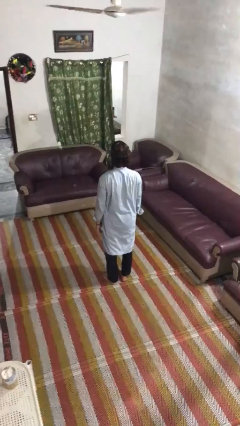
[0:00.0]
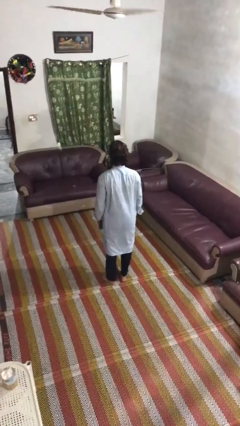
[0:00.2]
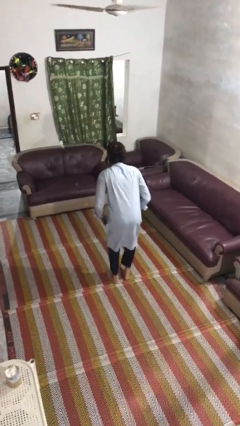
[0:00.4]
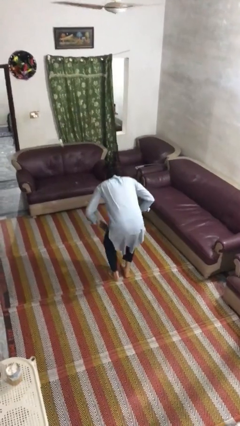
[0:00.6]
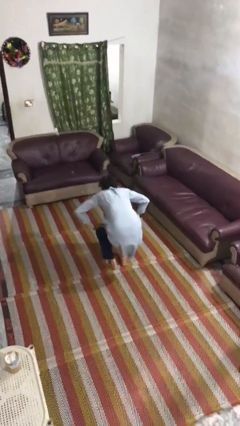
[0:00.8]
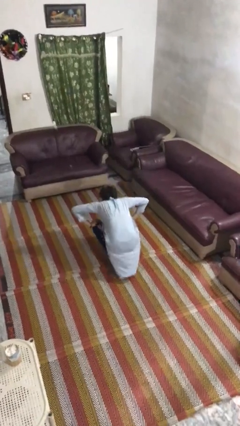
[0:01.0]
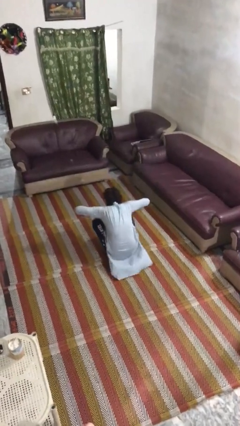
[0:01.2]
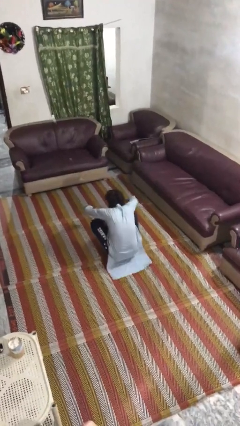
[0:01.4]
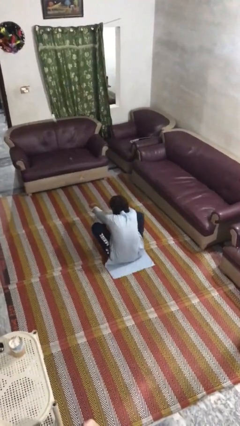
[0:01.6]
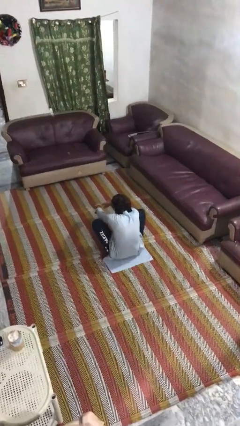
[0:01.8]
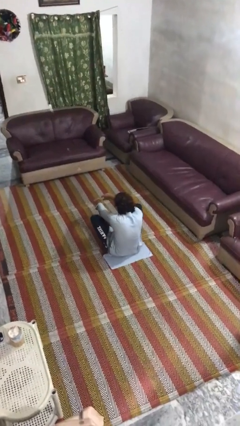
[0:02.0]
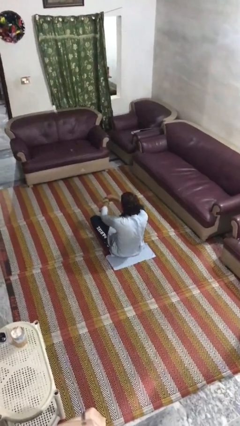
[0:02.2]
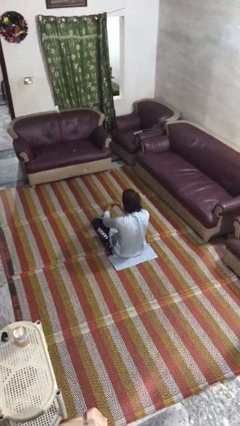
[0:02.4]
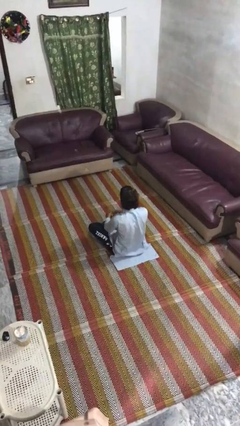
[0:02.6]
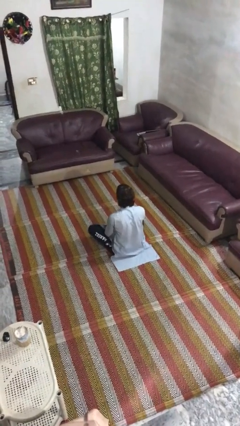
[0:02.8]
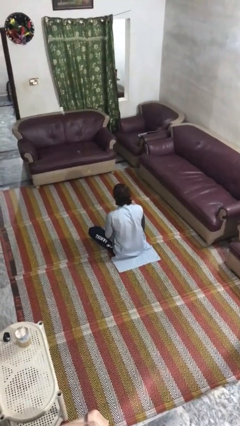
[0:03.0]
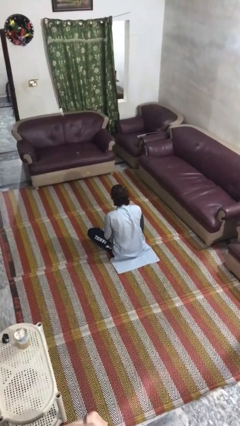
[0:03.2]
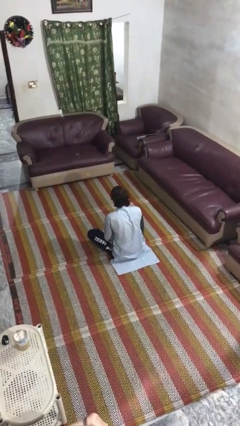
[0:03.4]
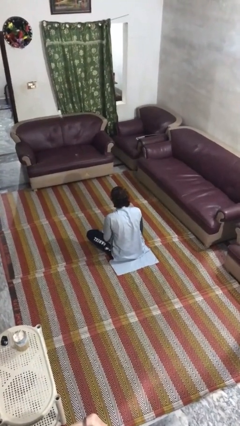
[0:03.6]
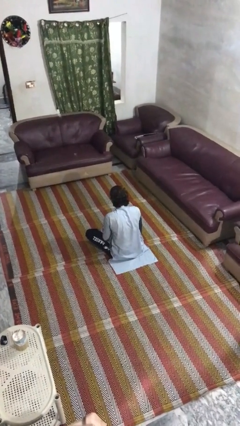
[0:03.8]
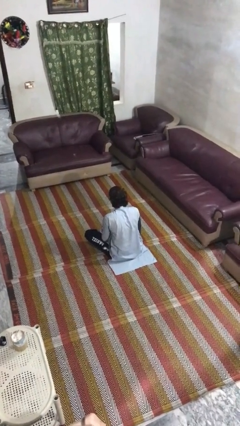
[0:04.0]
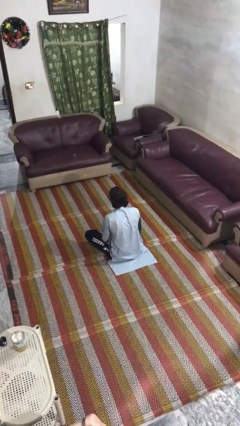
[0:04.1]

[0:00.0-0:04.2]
person sits crisscross

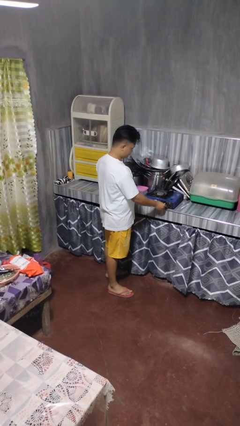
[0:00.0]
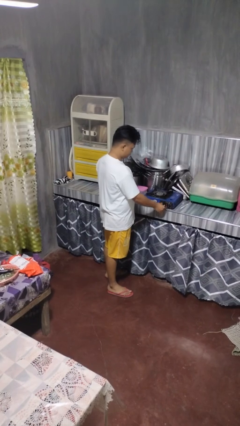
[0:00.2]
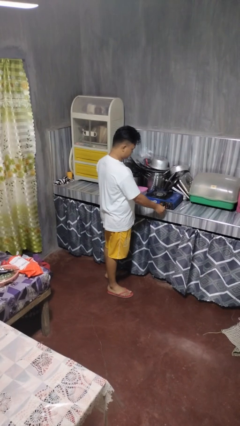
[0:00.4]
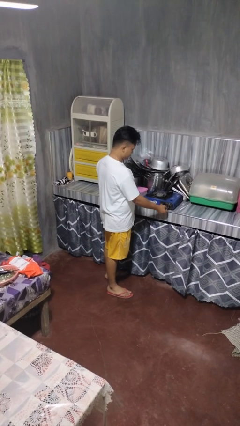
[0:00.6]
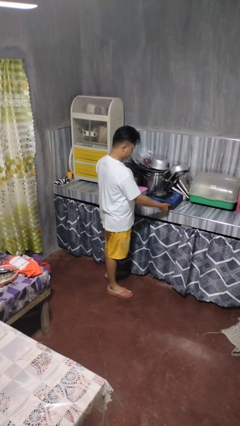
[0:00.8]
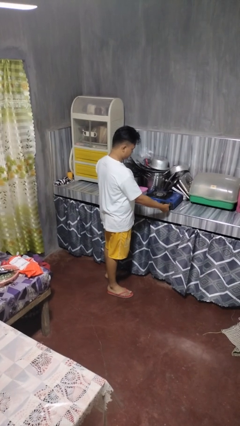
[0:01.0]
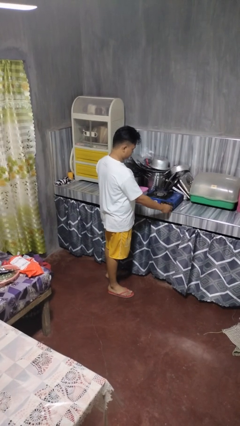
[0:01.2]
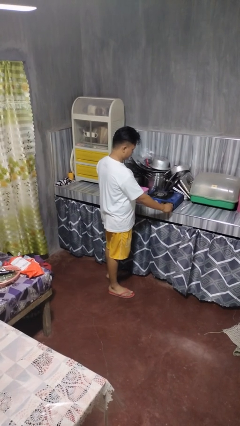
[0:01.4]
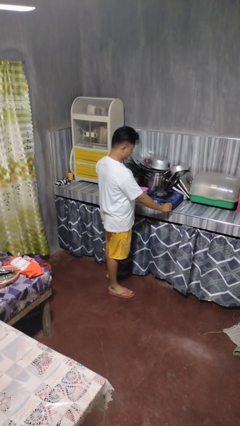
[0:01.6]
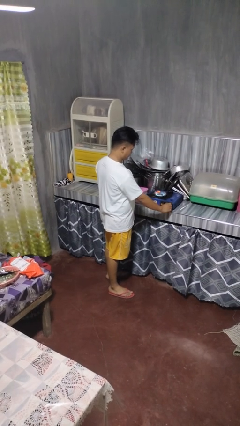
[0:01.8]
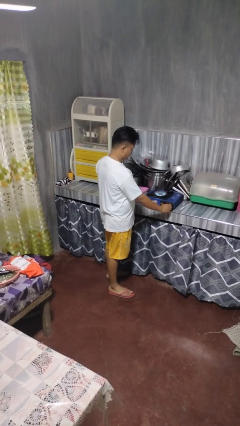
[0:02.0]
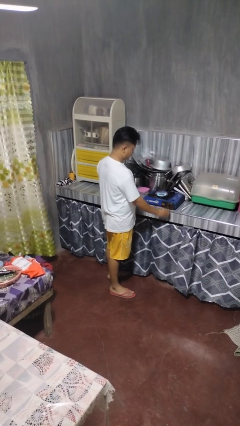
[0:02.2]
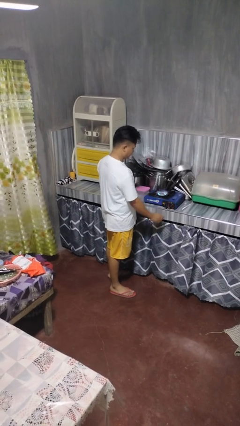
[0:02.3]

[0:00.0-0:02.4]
person turns on stovetop

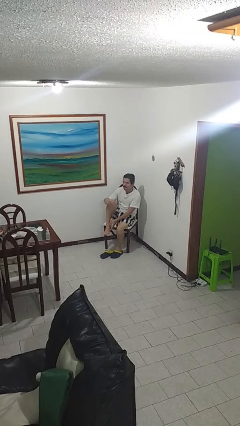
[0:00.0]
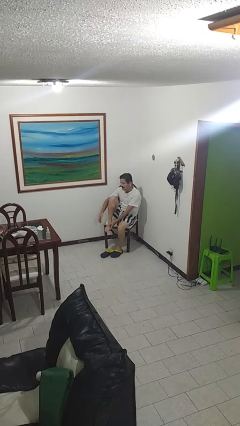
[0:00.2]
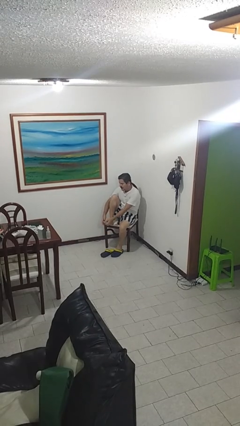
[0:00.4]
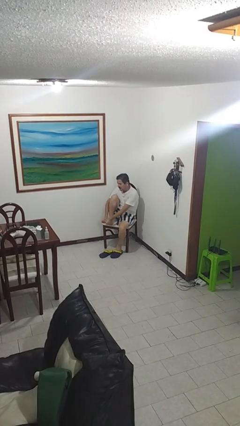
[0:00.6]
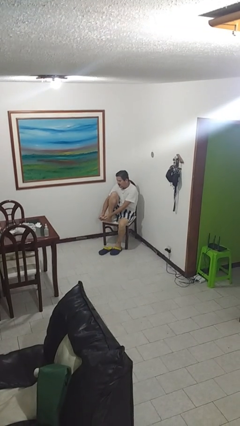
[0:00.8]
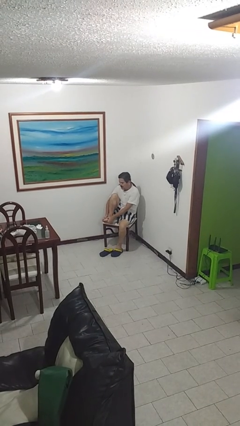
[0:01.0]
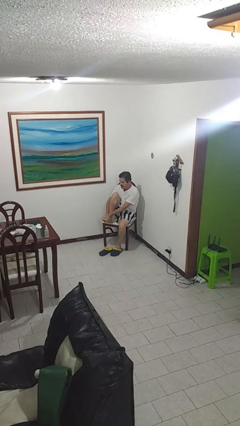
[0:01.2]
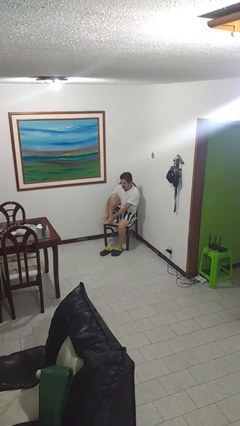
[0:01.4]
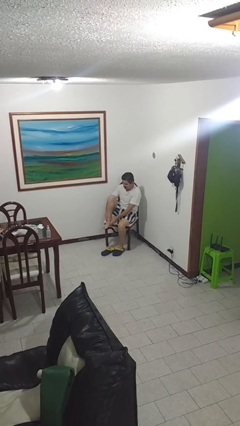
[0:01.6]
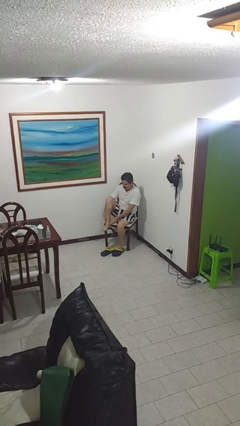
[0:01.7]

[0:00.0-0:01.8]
person rubs foot

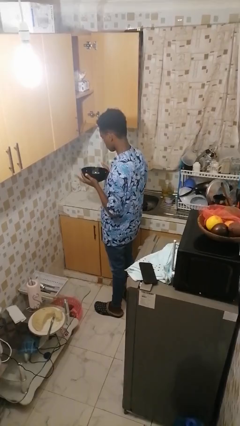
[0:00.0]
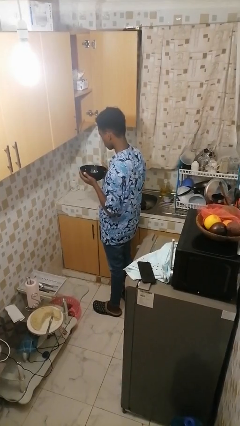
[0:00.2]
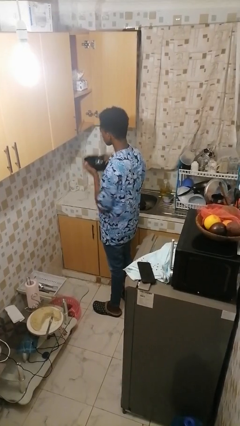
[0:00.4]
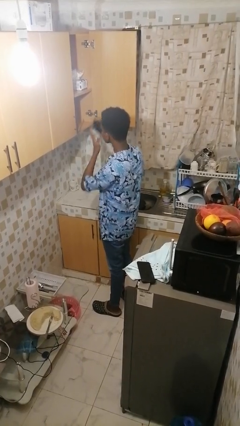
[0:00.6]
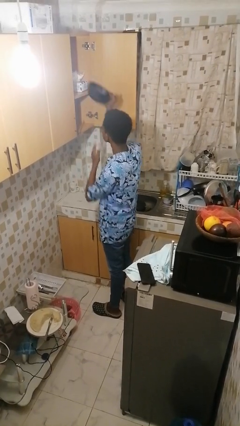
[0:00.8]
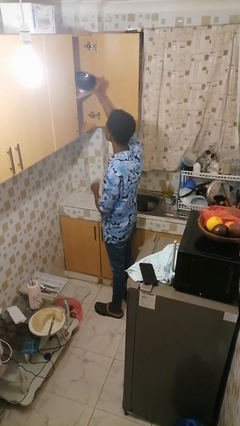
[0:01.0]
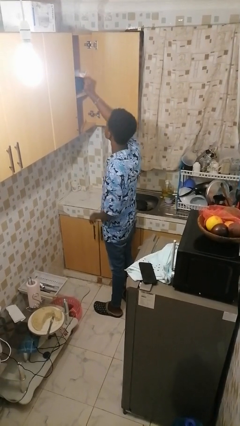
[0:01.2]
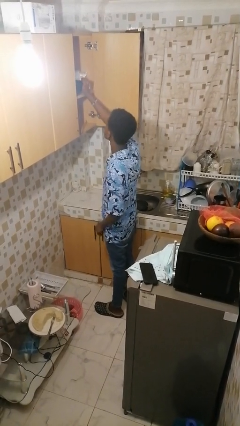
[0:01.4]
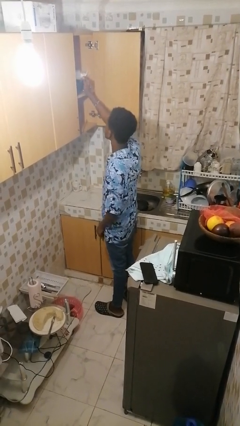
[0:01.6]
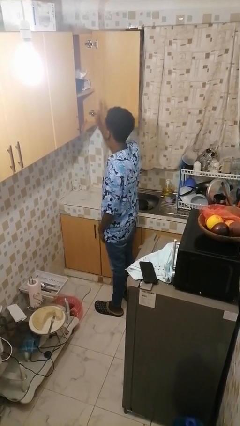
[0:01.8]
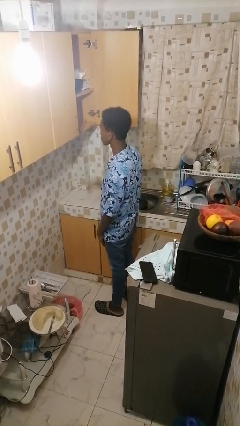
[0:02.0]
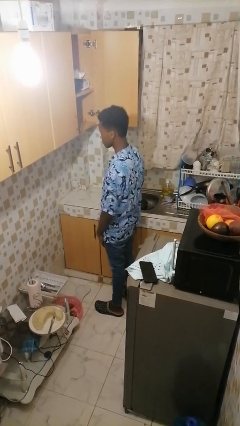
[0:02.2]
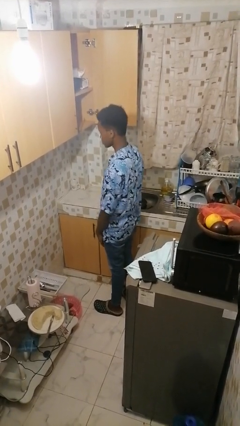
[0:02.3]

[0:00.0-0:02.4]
person puts down object into cabinet

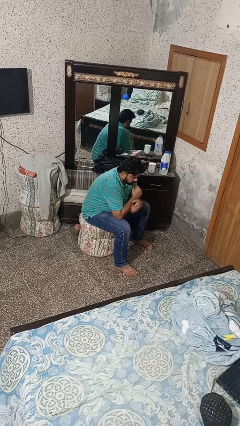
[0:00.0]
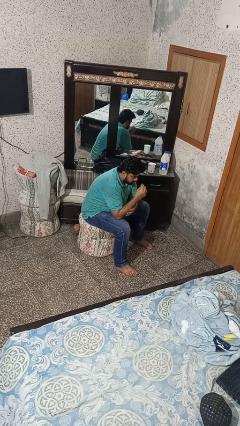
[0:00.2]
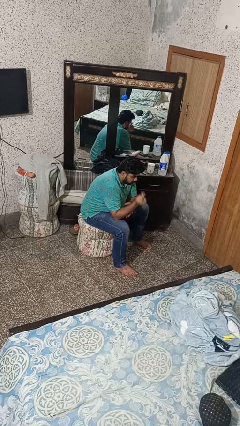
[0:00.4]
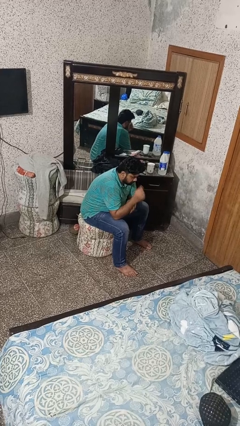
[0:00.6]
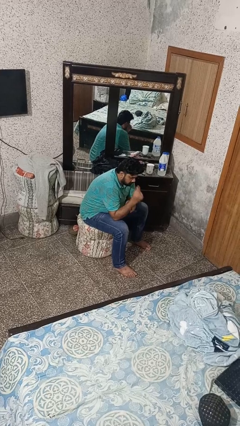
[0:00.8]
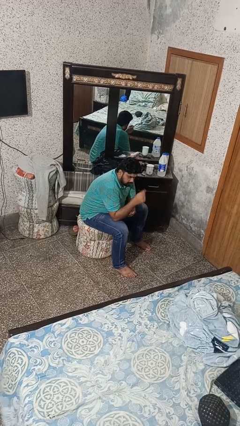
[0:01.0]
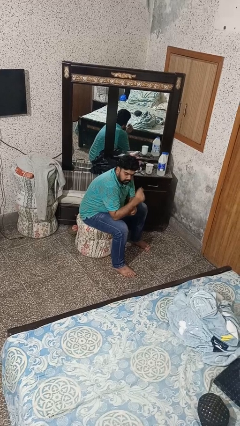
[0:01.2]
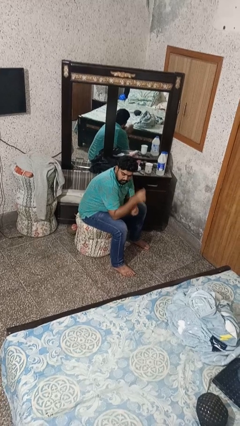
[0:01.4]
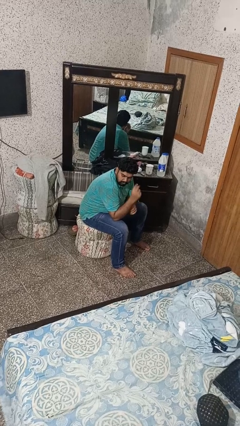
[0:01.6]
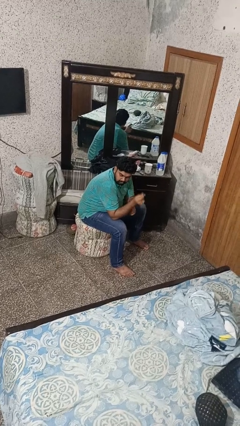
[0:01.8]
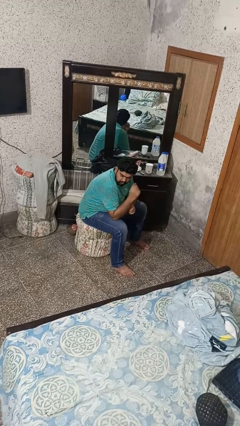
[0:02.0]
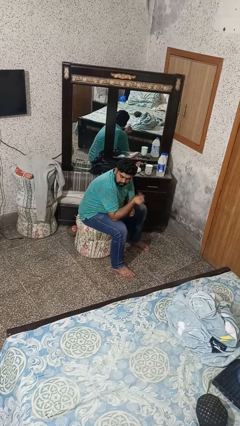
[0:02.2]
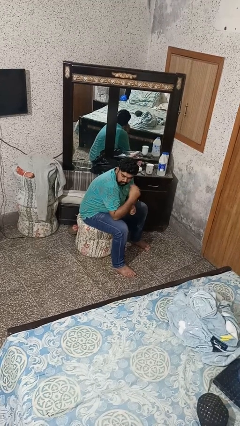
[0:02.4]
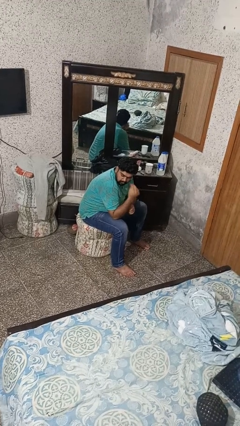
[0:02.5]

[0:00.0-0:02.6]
person snaps fingers

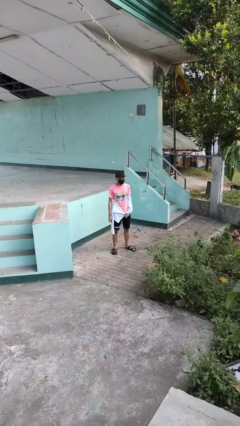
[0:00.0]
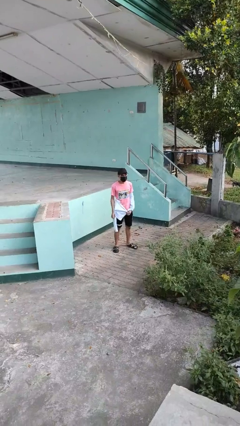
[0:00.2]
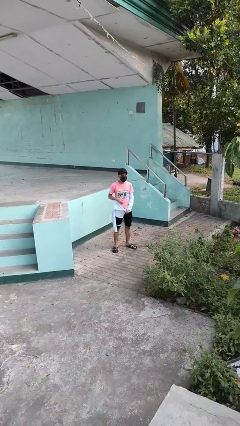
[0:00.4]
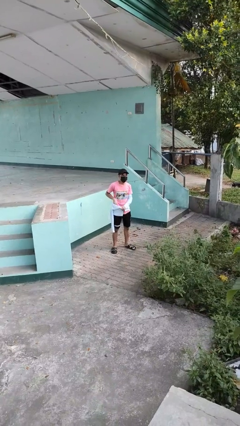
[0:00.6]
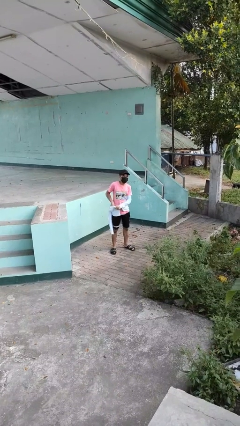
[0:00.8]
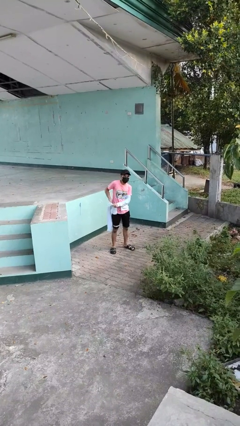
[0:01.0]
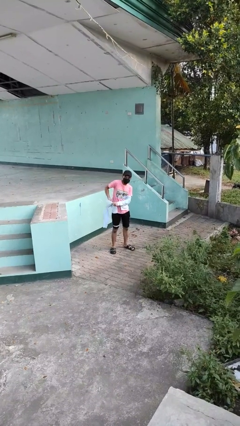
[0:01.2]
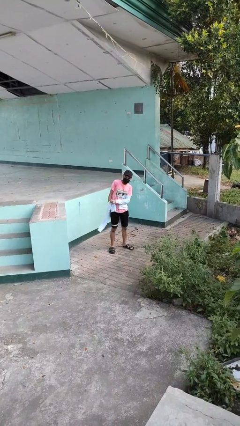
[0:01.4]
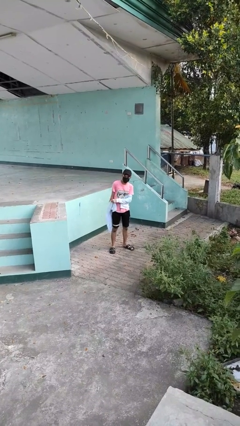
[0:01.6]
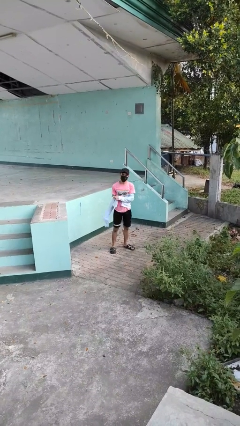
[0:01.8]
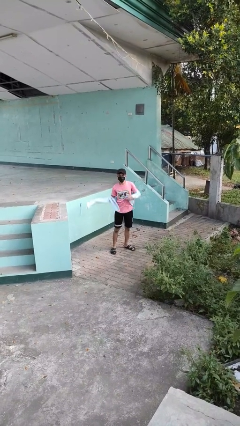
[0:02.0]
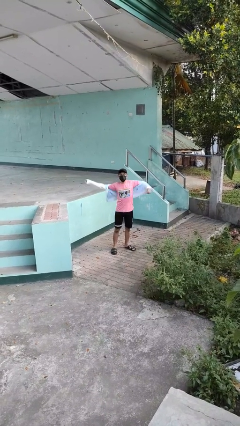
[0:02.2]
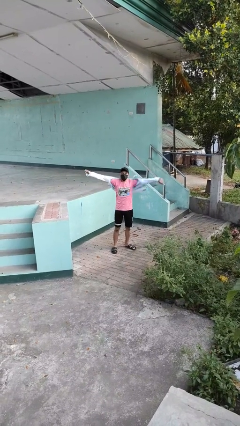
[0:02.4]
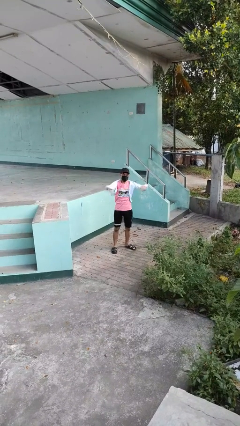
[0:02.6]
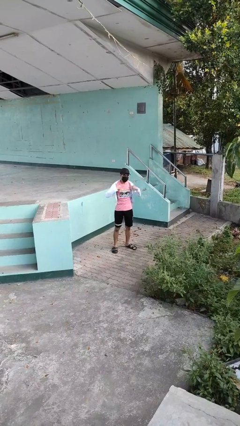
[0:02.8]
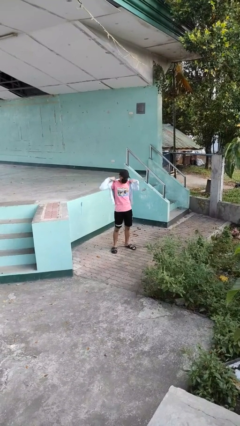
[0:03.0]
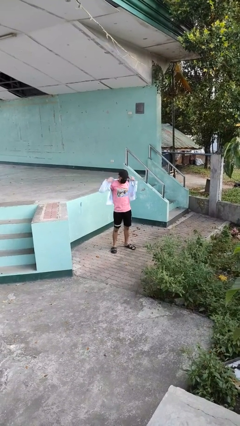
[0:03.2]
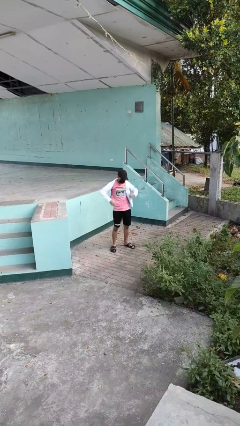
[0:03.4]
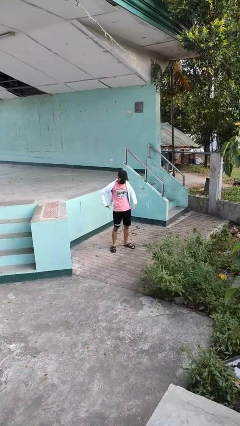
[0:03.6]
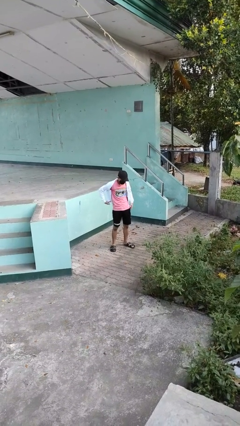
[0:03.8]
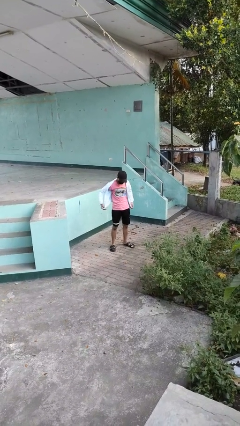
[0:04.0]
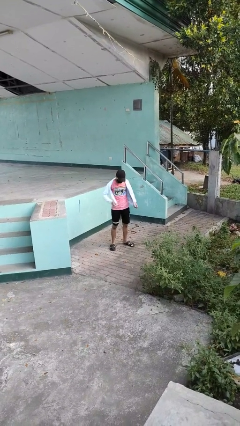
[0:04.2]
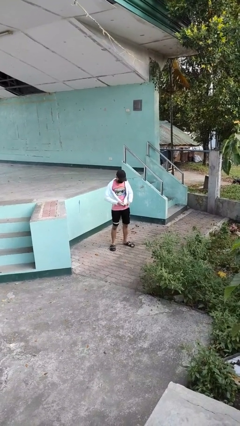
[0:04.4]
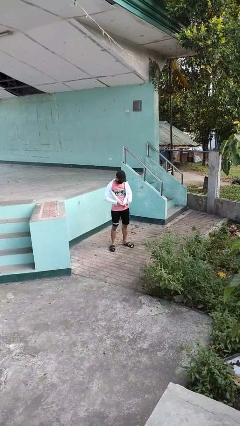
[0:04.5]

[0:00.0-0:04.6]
person puts on jacket
